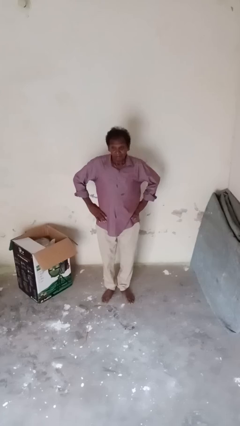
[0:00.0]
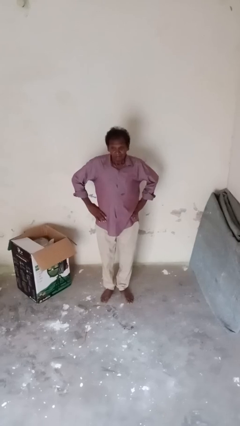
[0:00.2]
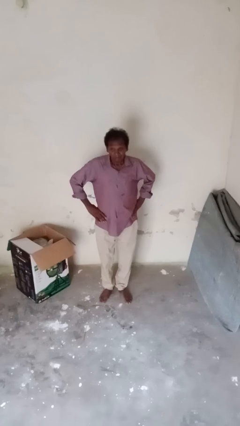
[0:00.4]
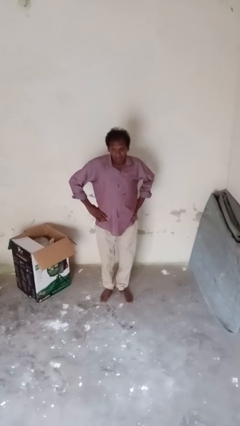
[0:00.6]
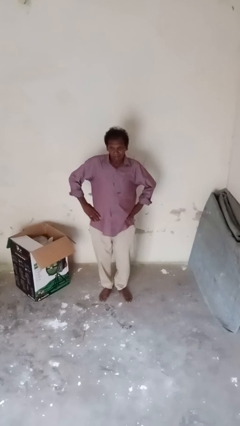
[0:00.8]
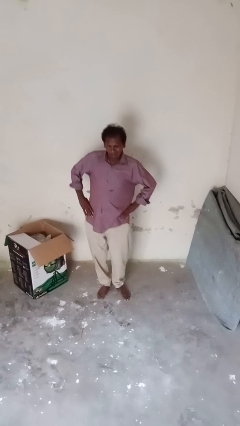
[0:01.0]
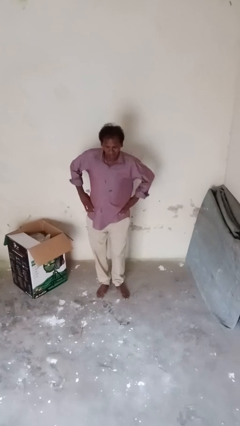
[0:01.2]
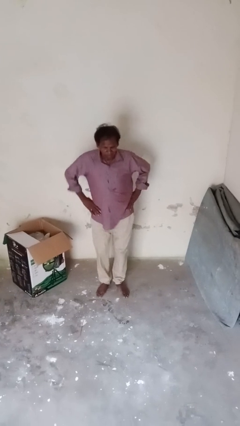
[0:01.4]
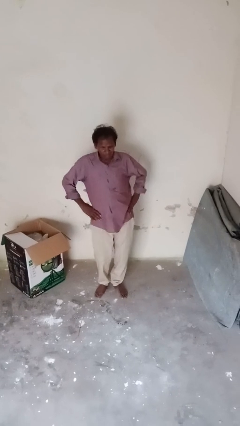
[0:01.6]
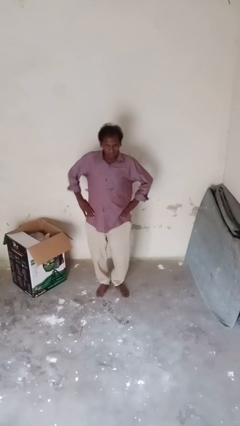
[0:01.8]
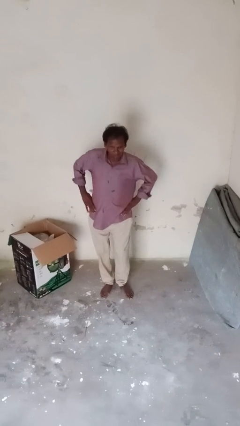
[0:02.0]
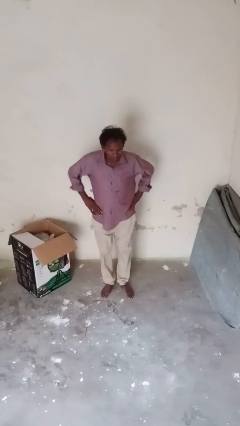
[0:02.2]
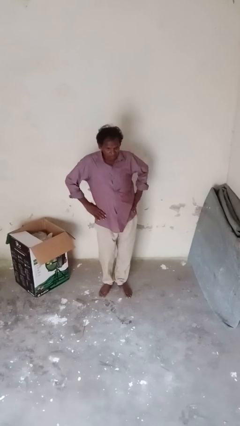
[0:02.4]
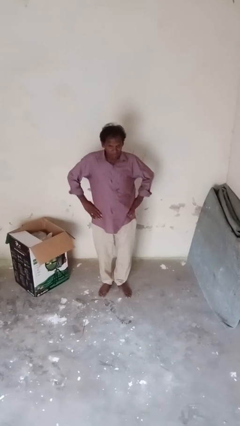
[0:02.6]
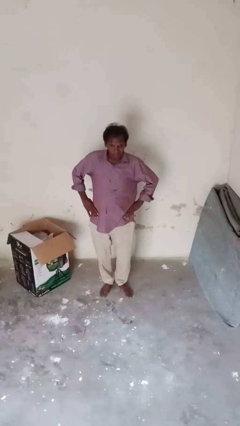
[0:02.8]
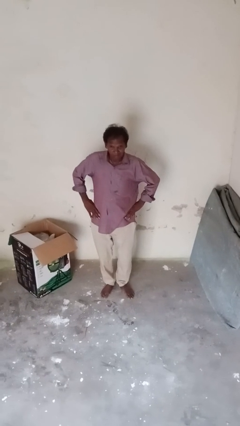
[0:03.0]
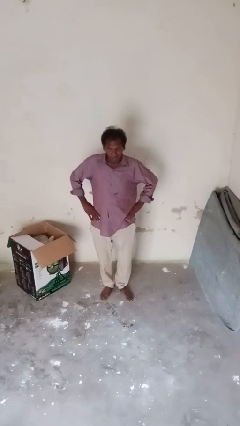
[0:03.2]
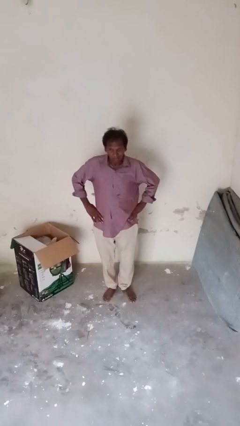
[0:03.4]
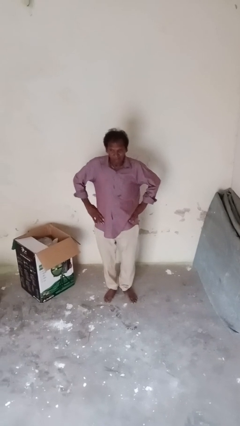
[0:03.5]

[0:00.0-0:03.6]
person wiggles hips

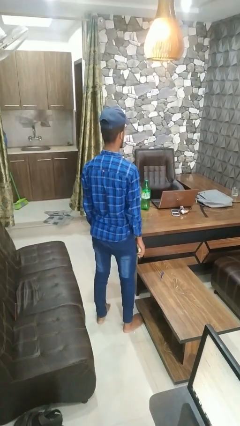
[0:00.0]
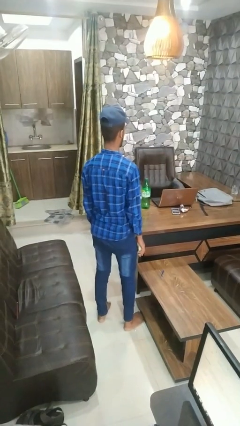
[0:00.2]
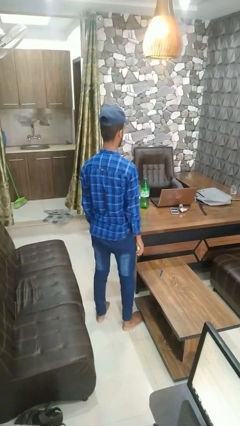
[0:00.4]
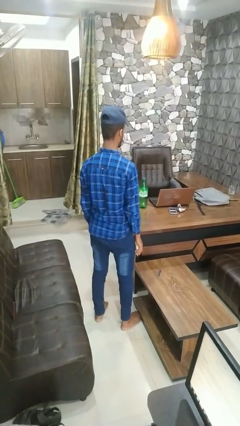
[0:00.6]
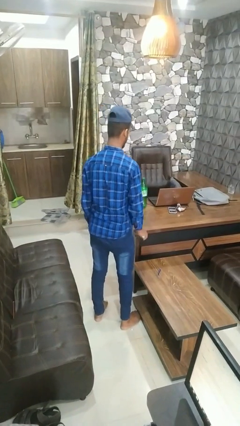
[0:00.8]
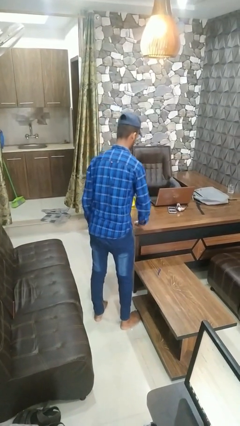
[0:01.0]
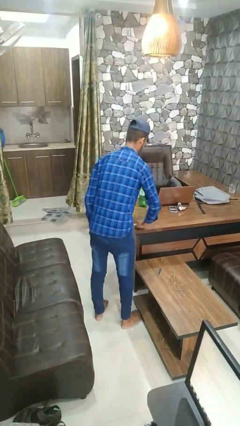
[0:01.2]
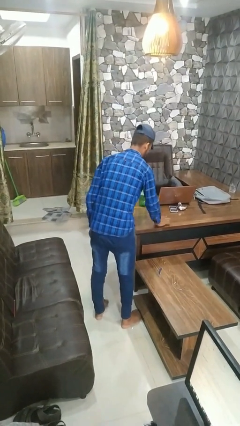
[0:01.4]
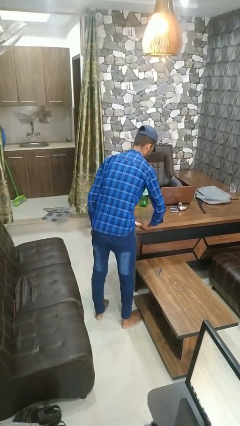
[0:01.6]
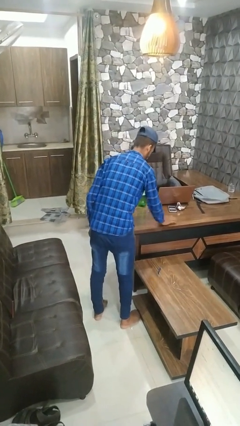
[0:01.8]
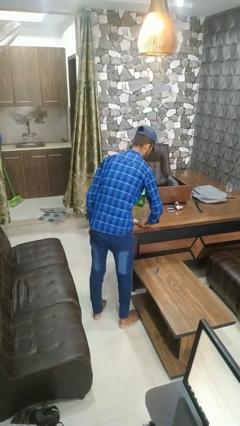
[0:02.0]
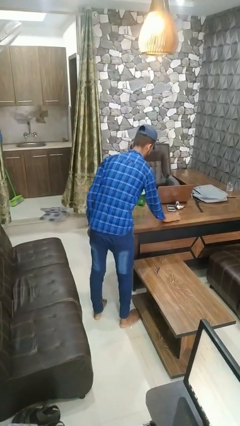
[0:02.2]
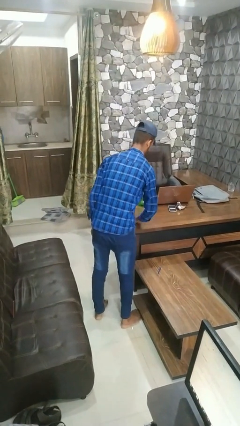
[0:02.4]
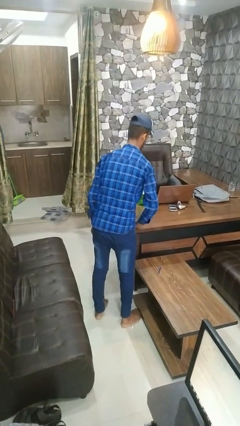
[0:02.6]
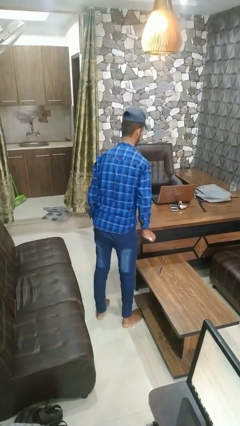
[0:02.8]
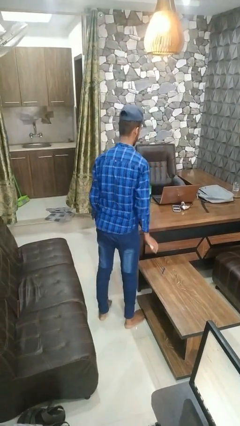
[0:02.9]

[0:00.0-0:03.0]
person dusts furniture

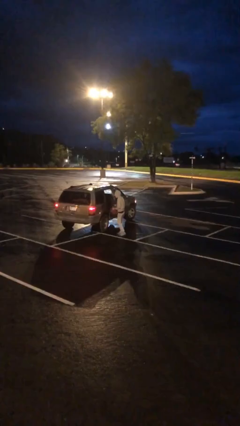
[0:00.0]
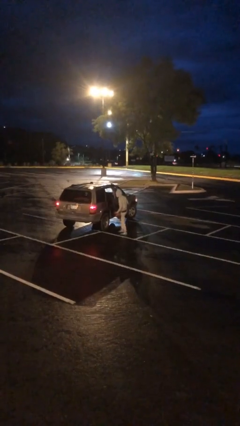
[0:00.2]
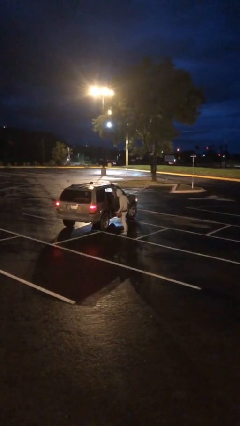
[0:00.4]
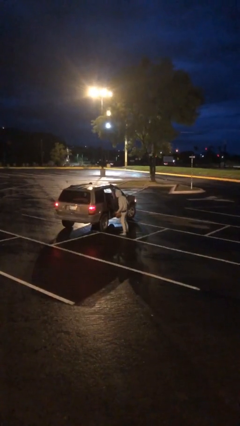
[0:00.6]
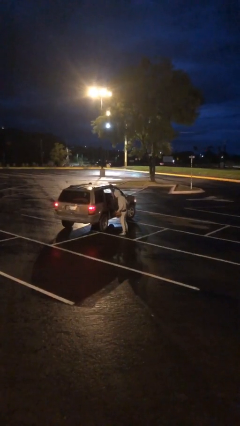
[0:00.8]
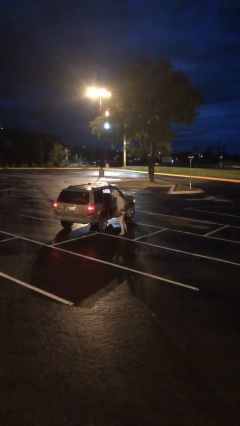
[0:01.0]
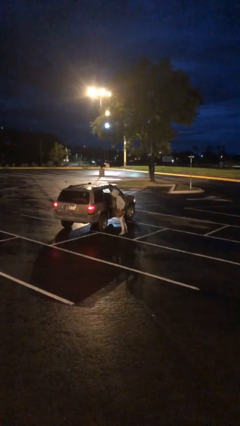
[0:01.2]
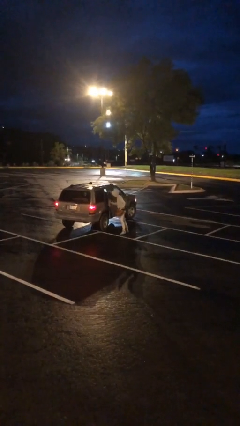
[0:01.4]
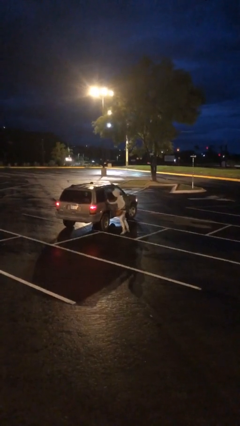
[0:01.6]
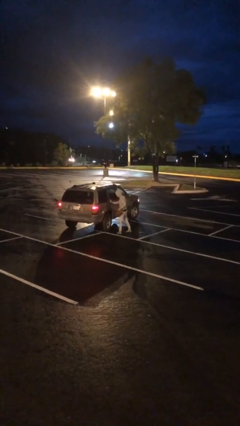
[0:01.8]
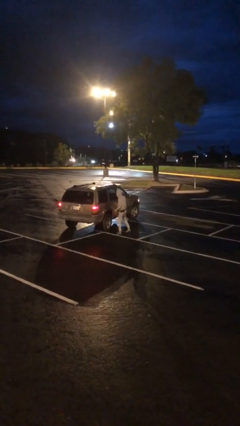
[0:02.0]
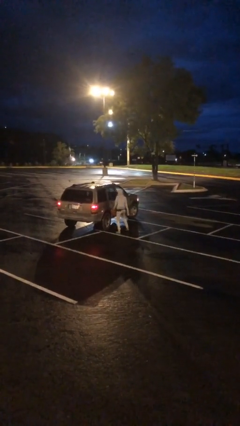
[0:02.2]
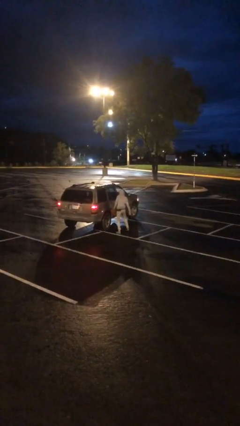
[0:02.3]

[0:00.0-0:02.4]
person closes car door

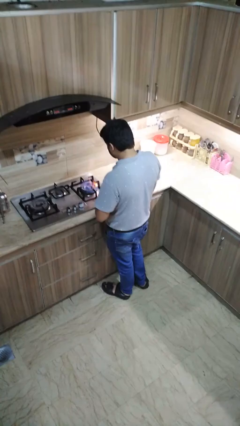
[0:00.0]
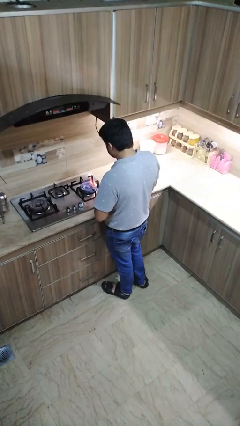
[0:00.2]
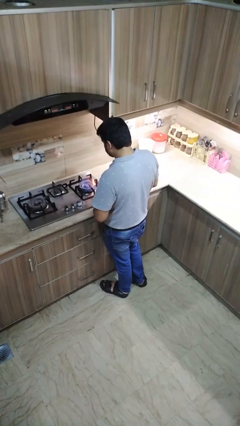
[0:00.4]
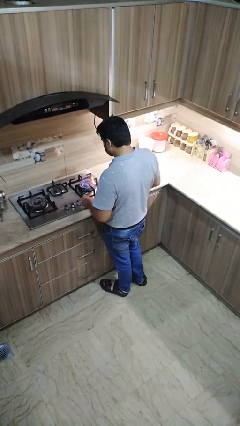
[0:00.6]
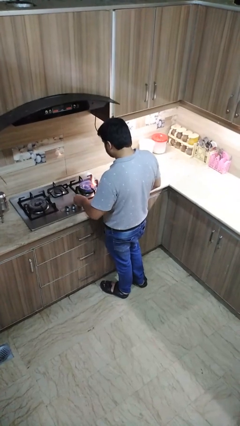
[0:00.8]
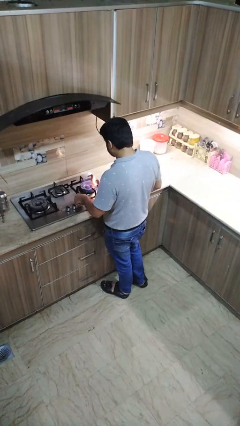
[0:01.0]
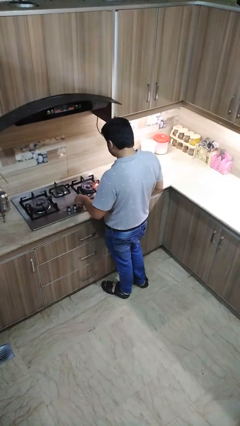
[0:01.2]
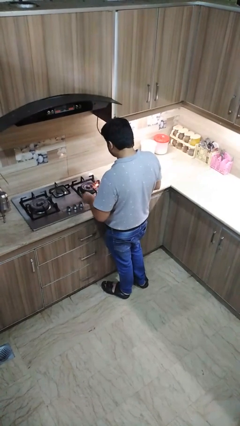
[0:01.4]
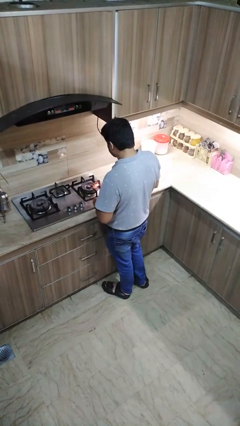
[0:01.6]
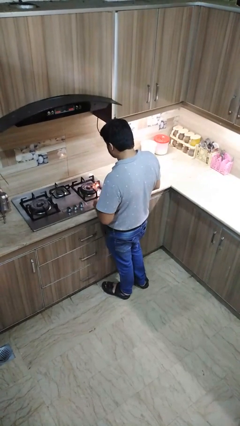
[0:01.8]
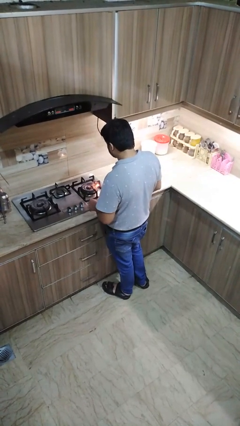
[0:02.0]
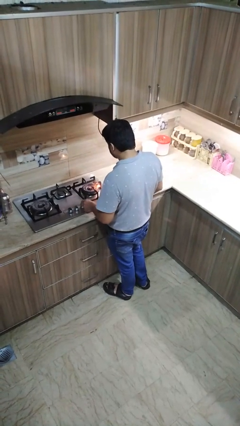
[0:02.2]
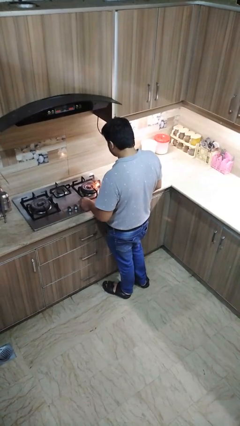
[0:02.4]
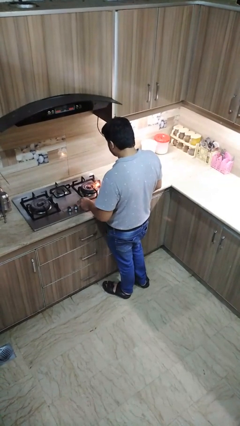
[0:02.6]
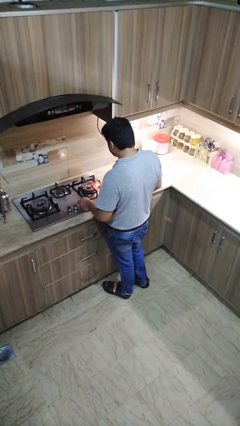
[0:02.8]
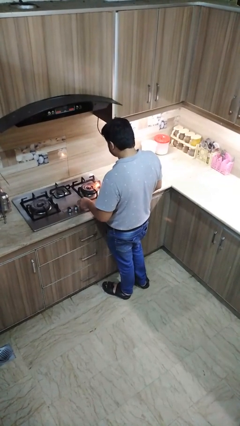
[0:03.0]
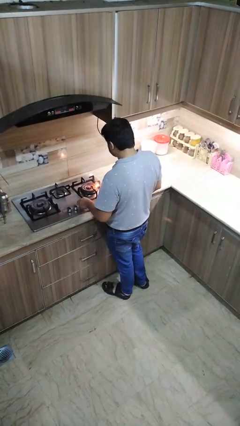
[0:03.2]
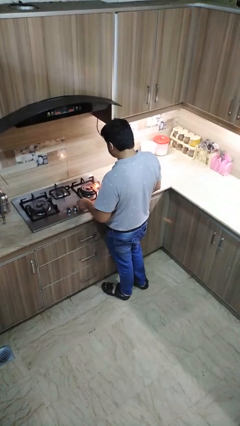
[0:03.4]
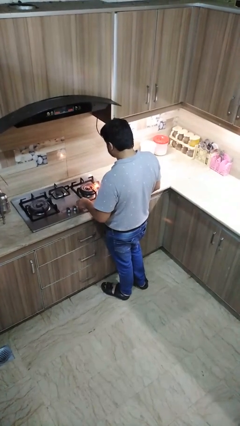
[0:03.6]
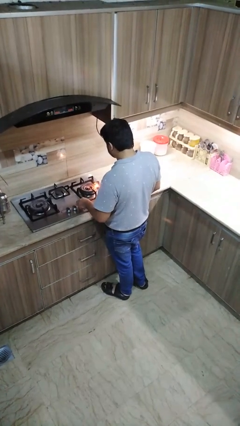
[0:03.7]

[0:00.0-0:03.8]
person turns off stovetop

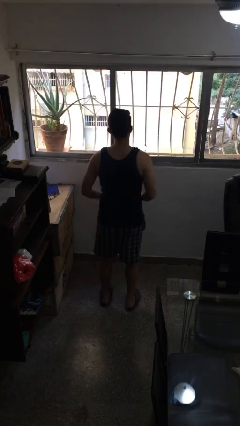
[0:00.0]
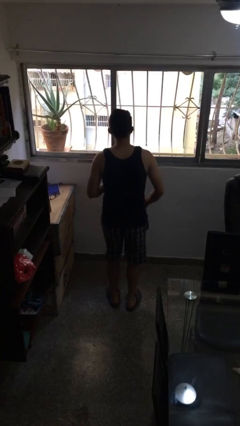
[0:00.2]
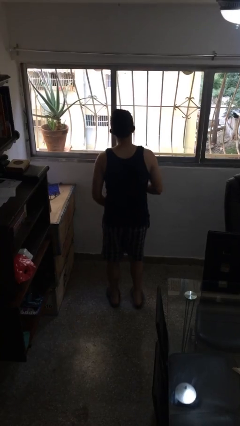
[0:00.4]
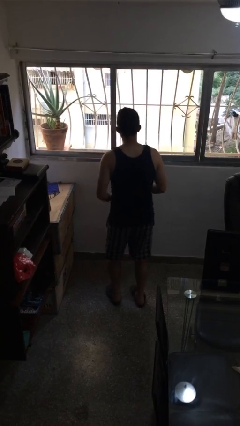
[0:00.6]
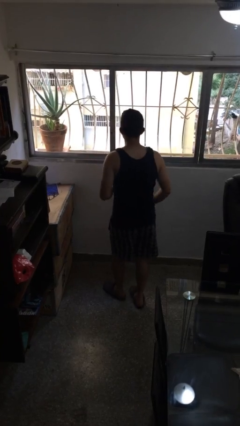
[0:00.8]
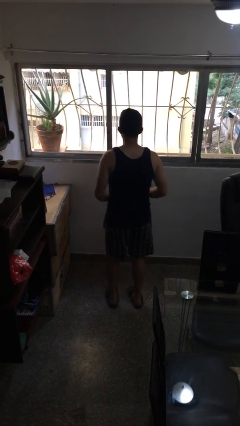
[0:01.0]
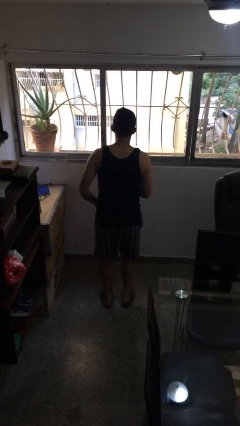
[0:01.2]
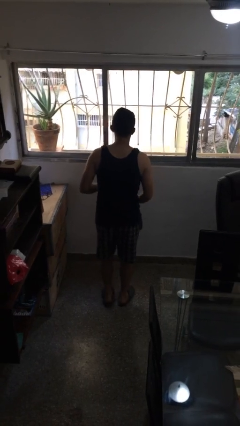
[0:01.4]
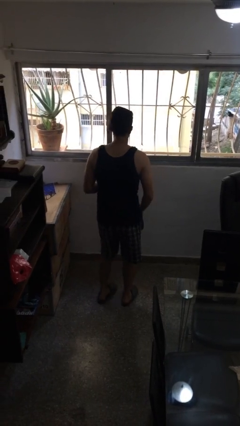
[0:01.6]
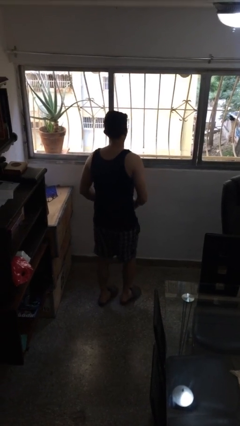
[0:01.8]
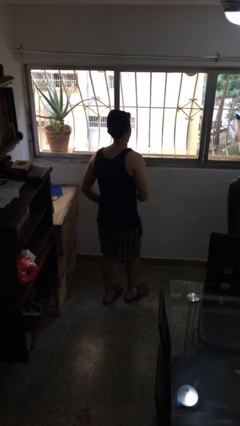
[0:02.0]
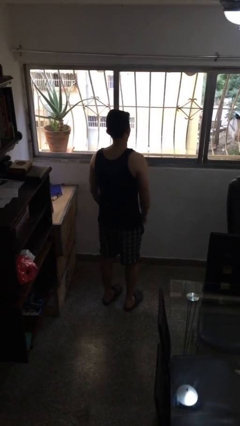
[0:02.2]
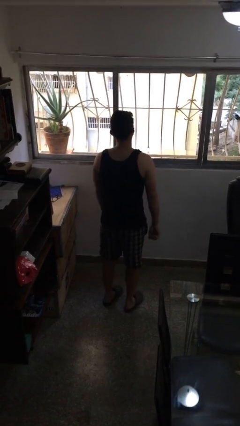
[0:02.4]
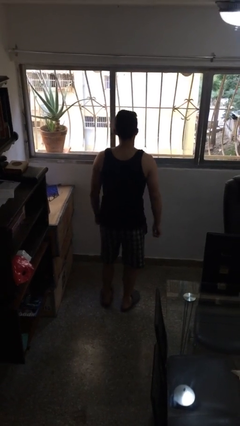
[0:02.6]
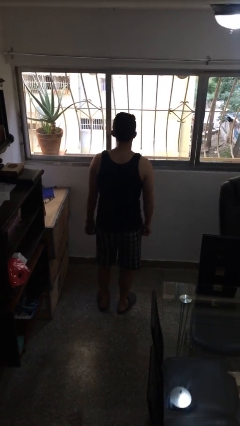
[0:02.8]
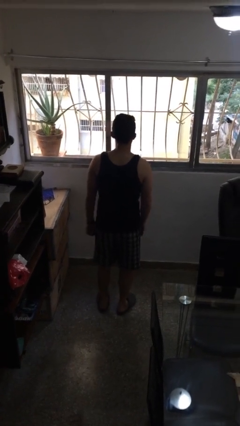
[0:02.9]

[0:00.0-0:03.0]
person dances in place

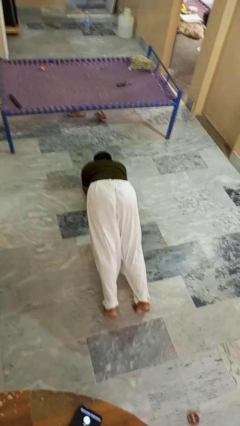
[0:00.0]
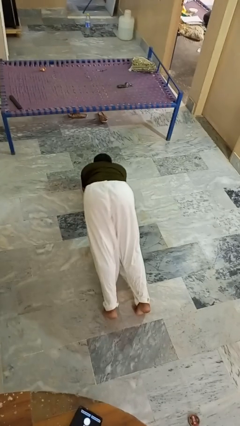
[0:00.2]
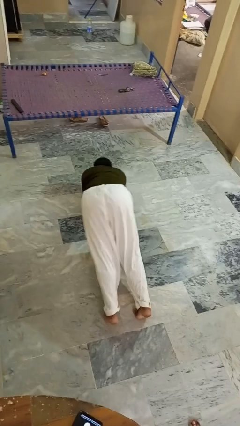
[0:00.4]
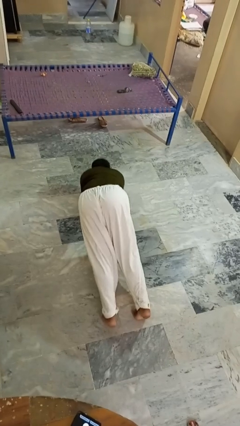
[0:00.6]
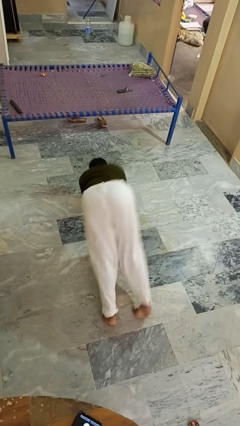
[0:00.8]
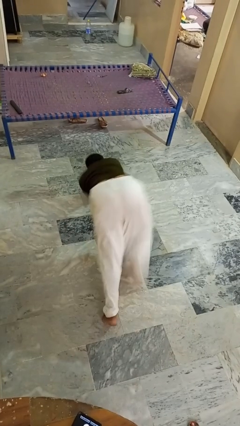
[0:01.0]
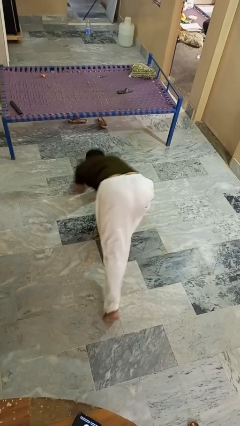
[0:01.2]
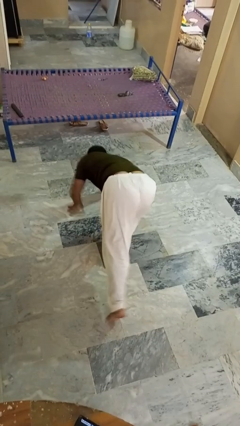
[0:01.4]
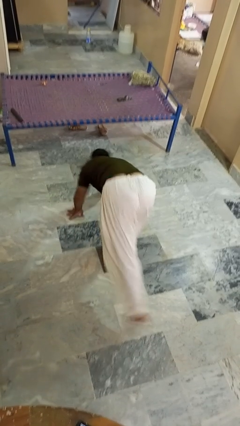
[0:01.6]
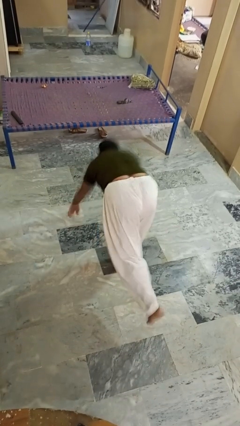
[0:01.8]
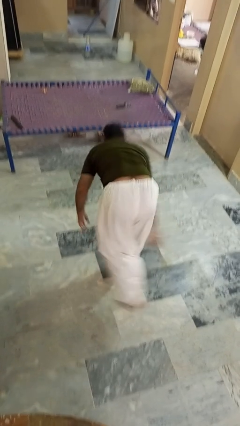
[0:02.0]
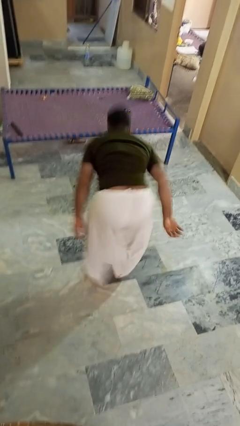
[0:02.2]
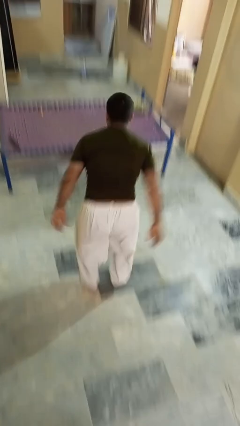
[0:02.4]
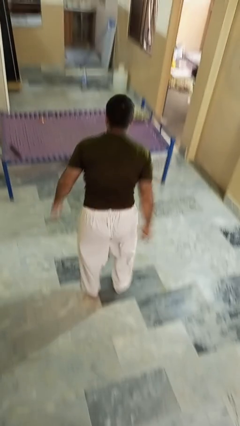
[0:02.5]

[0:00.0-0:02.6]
person stands up from floor
